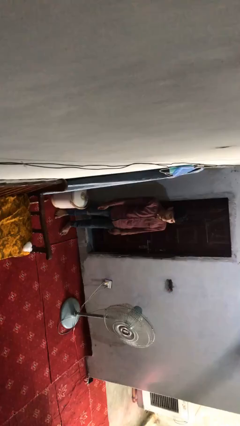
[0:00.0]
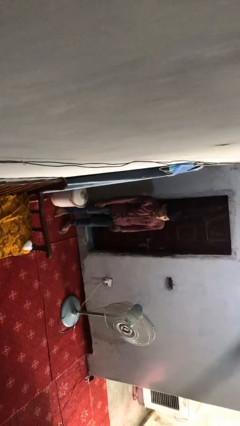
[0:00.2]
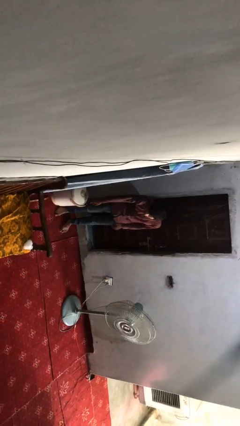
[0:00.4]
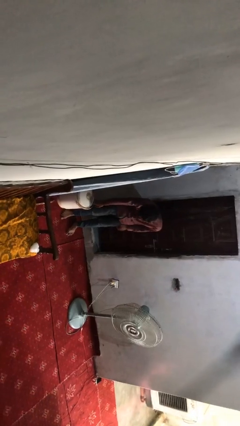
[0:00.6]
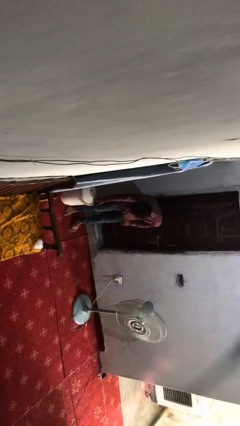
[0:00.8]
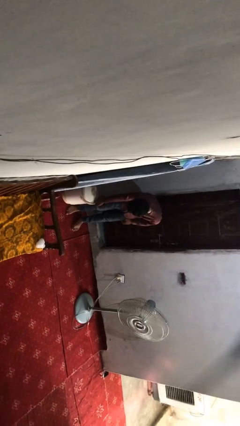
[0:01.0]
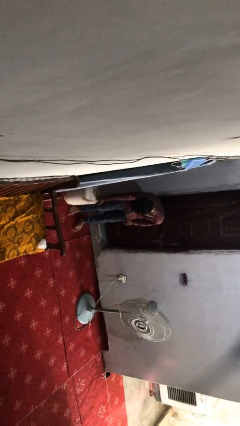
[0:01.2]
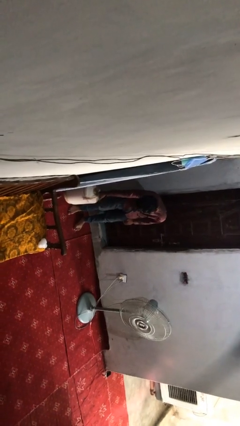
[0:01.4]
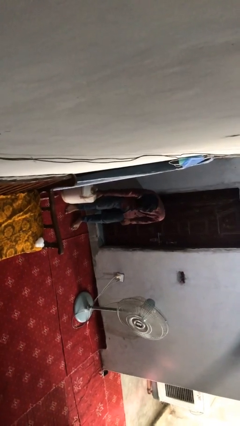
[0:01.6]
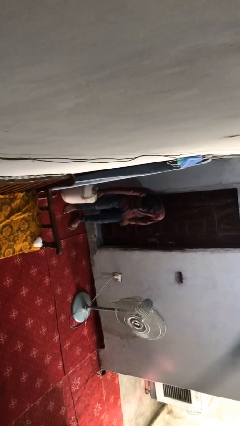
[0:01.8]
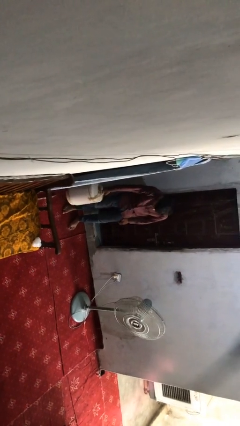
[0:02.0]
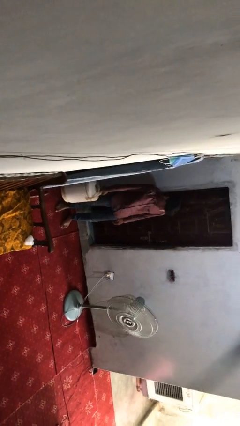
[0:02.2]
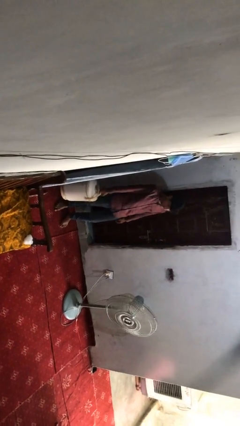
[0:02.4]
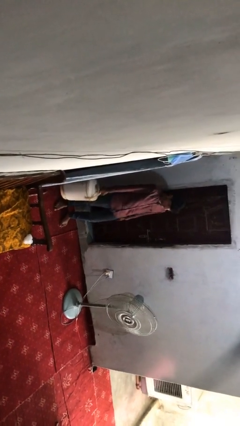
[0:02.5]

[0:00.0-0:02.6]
person picks up object from floor

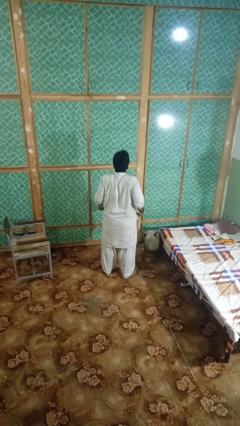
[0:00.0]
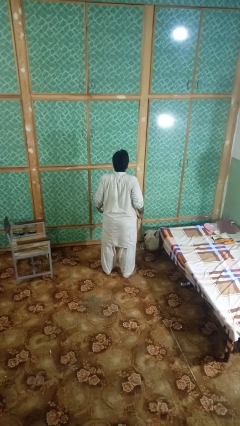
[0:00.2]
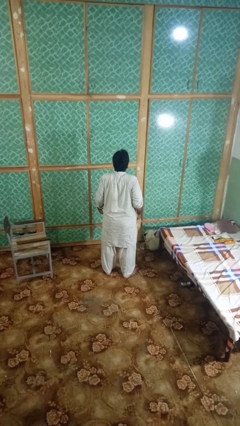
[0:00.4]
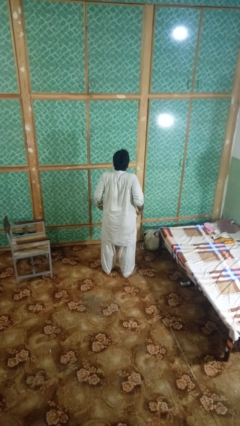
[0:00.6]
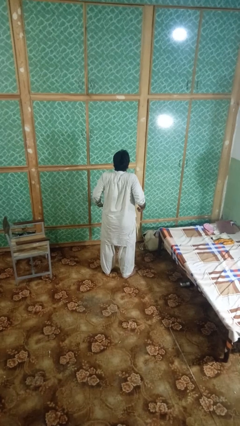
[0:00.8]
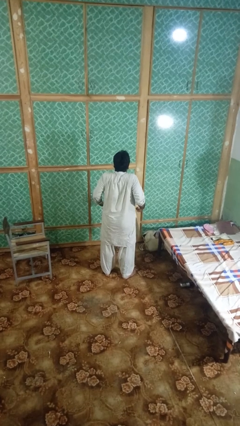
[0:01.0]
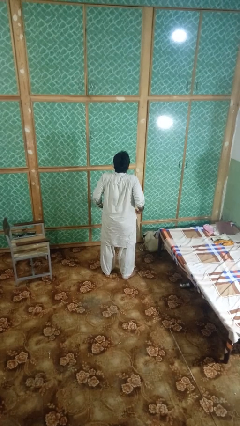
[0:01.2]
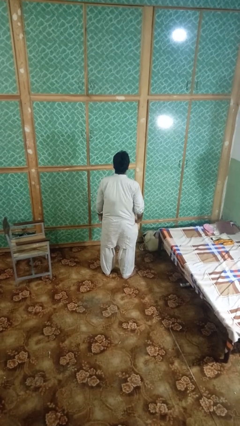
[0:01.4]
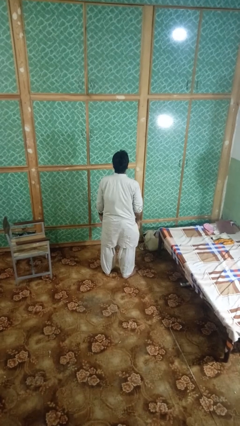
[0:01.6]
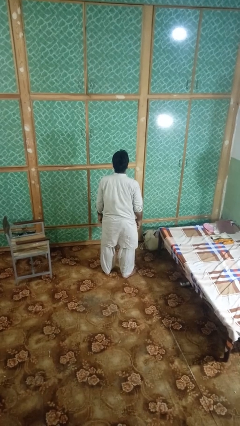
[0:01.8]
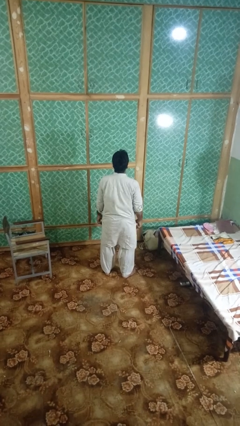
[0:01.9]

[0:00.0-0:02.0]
person shrugs

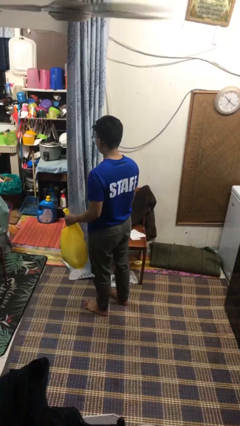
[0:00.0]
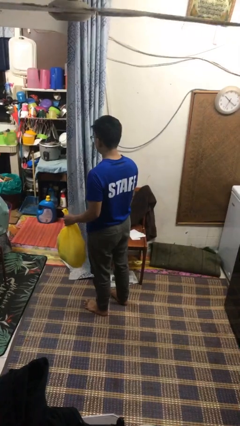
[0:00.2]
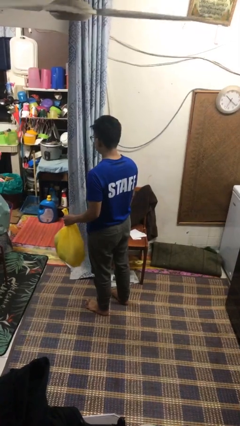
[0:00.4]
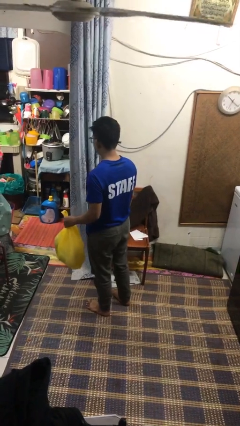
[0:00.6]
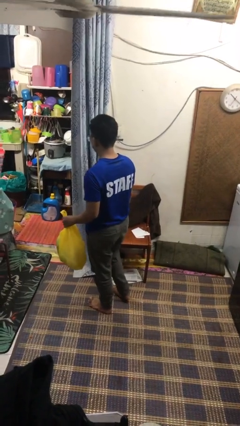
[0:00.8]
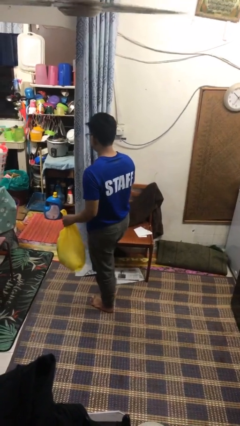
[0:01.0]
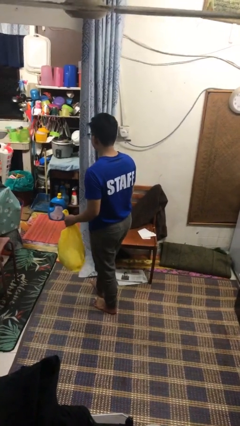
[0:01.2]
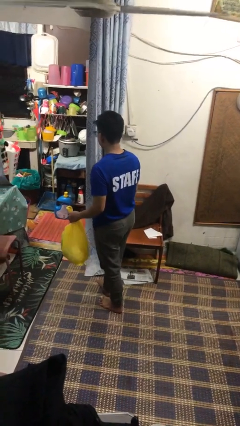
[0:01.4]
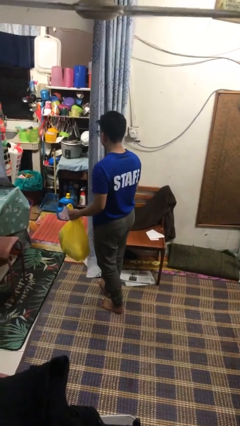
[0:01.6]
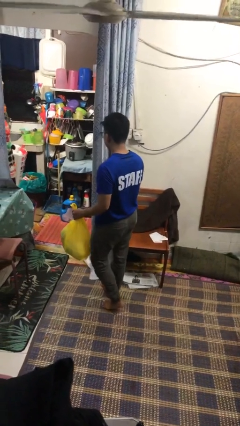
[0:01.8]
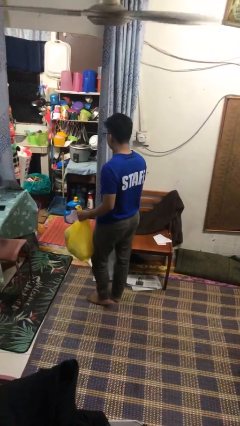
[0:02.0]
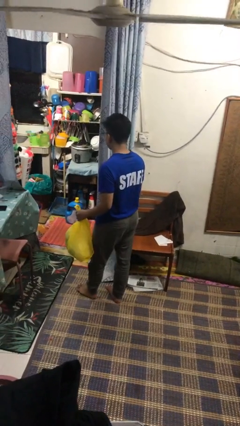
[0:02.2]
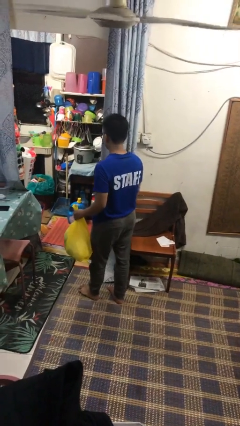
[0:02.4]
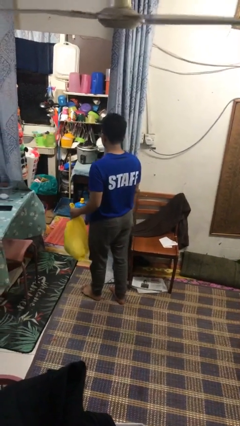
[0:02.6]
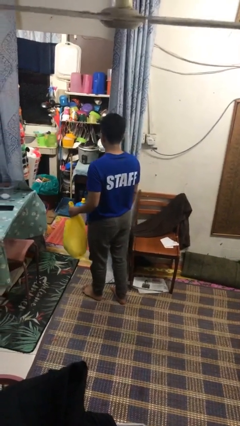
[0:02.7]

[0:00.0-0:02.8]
person carries groceries

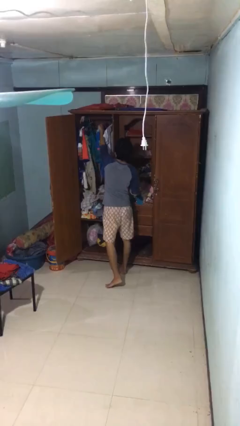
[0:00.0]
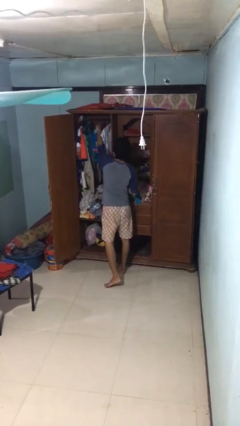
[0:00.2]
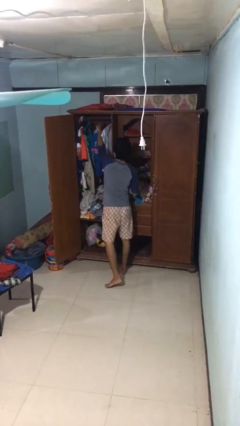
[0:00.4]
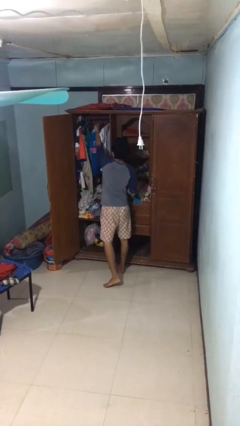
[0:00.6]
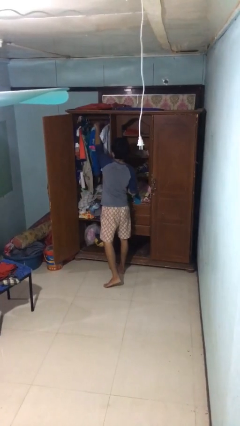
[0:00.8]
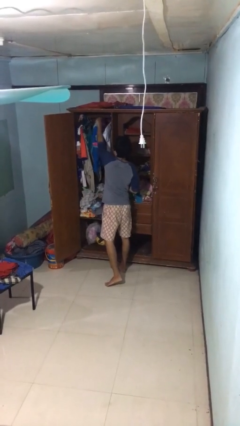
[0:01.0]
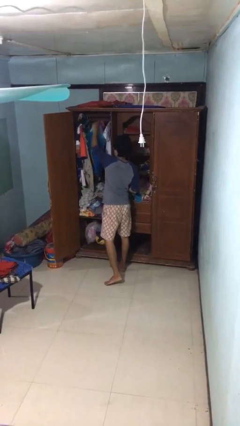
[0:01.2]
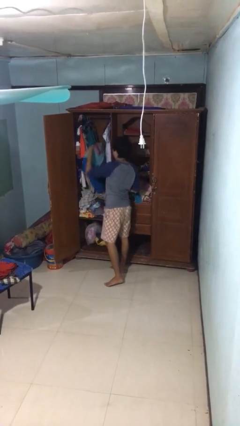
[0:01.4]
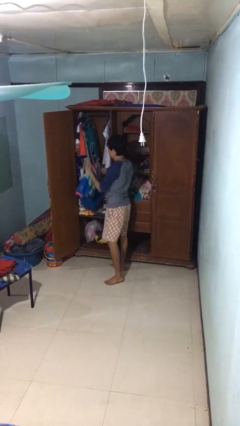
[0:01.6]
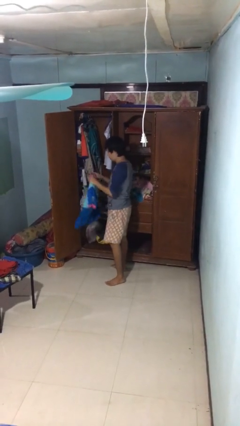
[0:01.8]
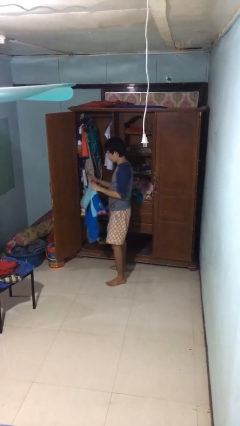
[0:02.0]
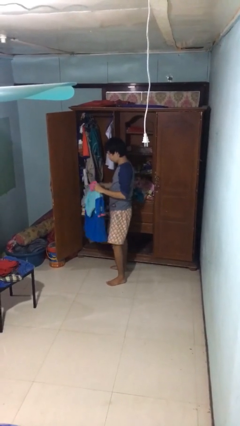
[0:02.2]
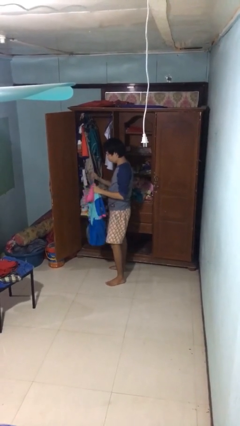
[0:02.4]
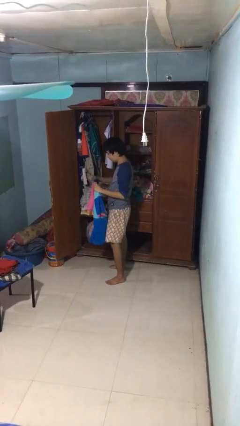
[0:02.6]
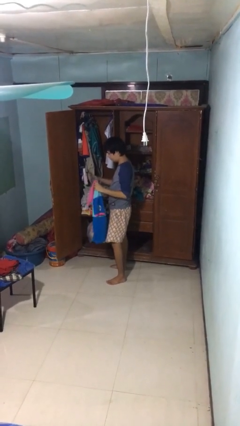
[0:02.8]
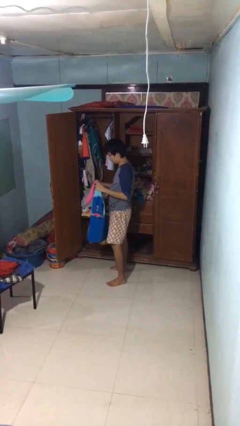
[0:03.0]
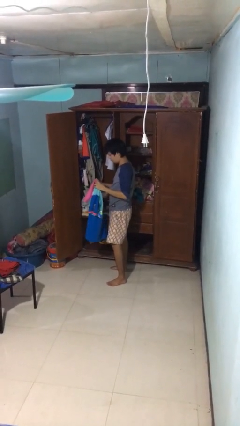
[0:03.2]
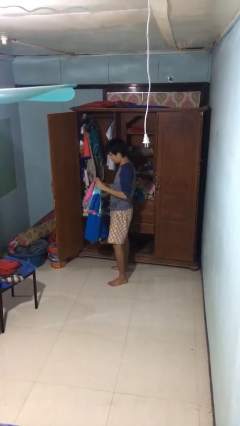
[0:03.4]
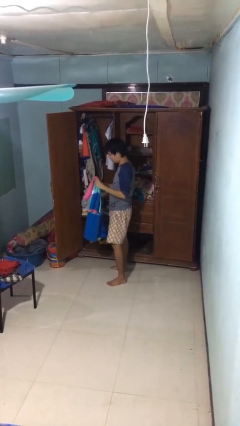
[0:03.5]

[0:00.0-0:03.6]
person takes clothes from closet

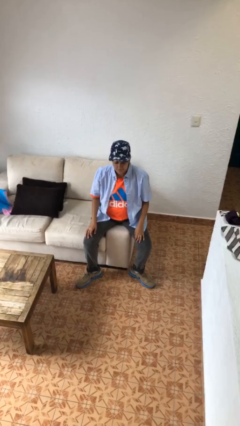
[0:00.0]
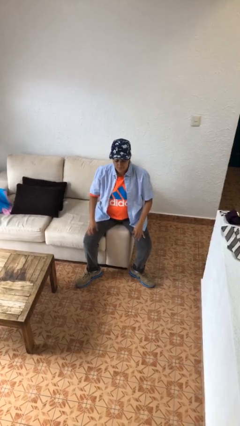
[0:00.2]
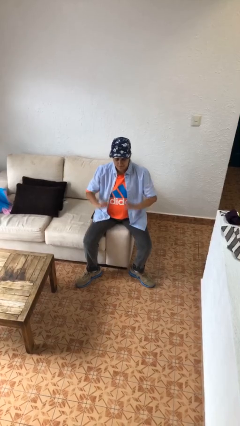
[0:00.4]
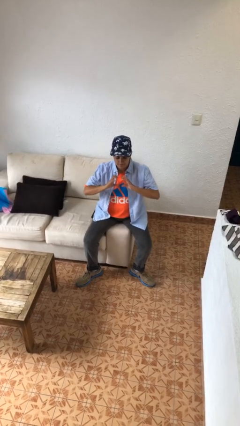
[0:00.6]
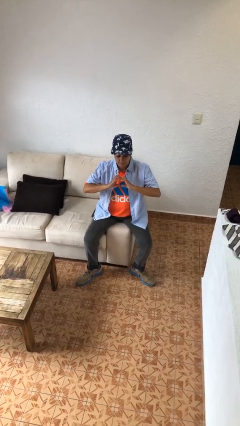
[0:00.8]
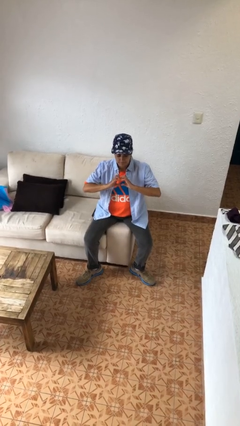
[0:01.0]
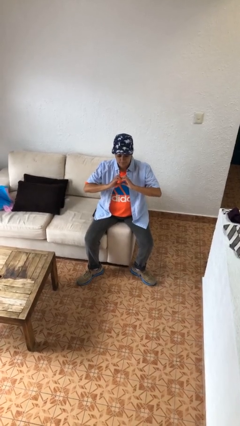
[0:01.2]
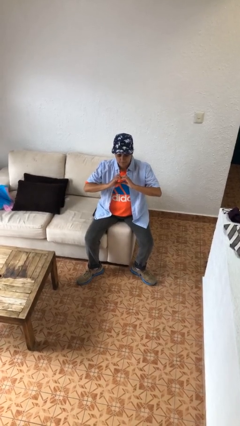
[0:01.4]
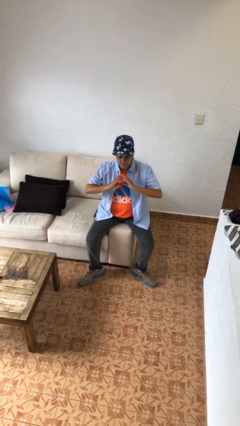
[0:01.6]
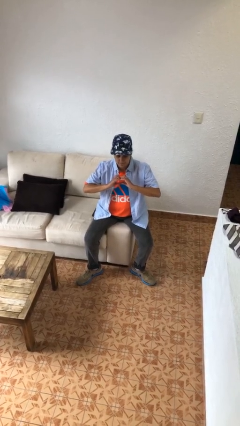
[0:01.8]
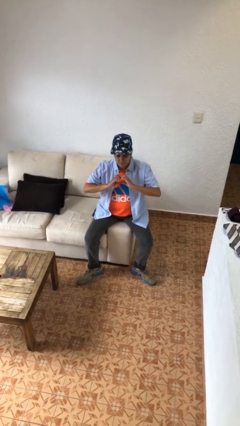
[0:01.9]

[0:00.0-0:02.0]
person gestures heart

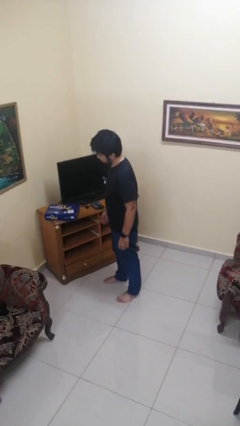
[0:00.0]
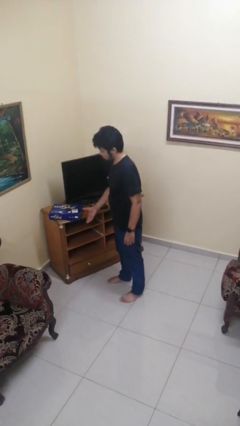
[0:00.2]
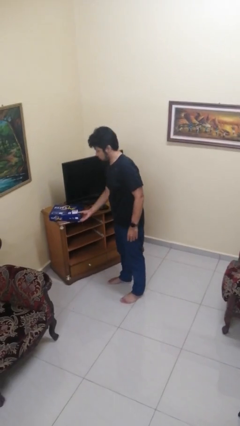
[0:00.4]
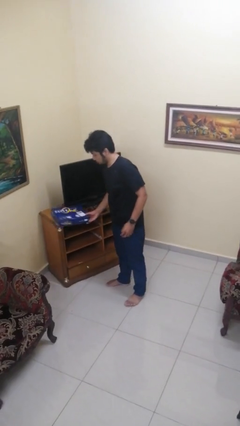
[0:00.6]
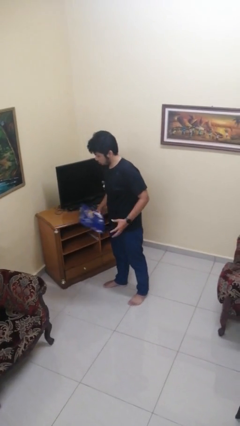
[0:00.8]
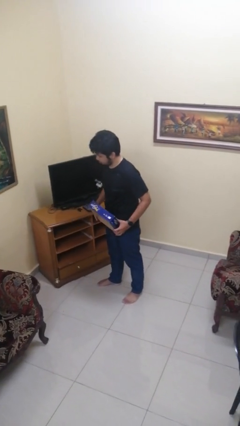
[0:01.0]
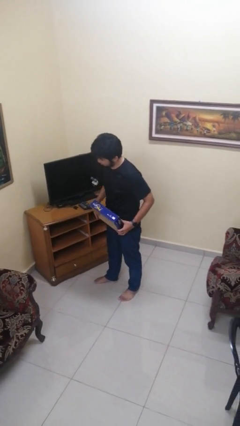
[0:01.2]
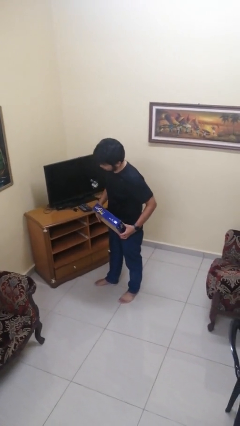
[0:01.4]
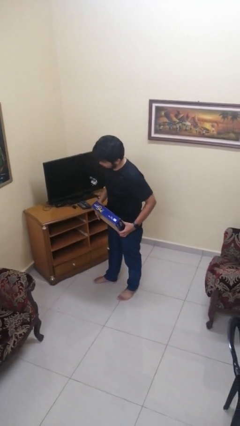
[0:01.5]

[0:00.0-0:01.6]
person picks up object from countertop

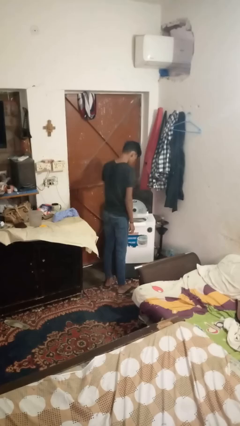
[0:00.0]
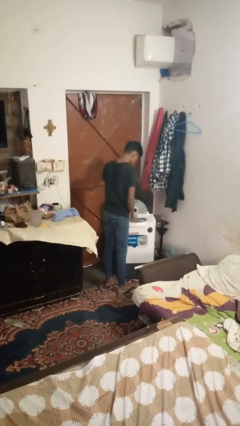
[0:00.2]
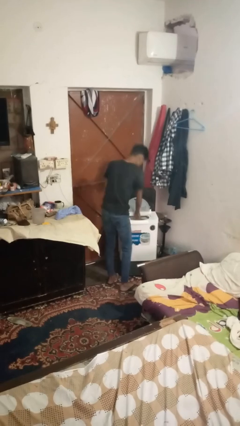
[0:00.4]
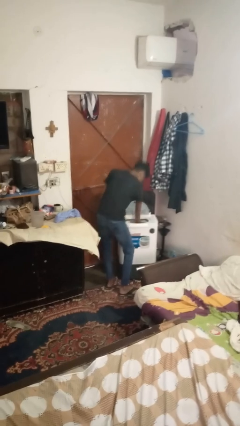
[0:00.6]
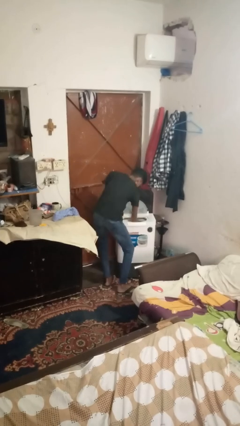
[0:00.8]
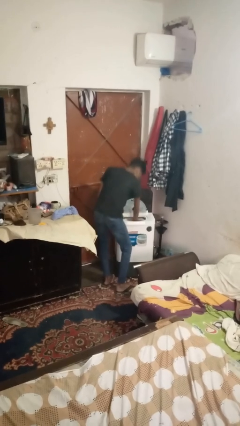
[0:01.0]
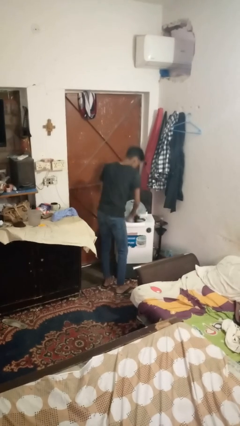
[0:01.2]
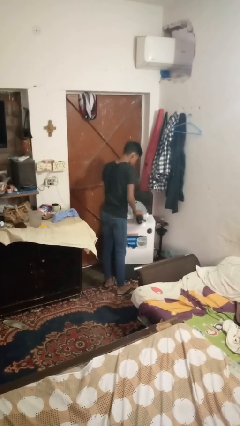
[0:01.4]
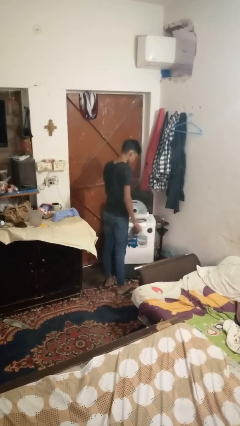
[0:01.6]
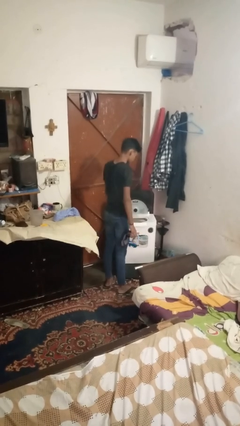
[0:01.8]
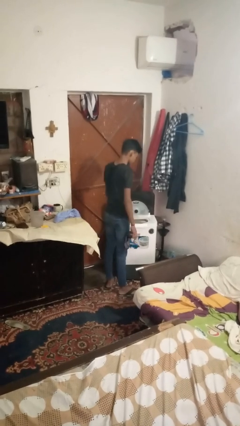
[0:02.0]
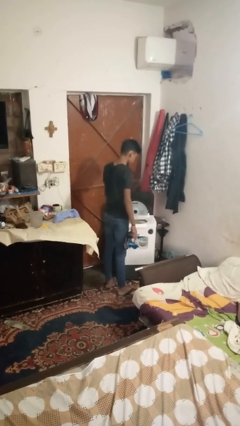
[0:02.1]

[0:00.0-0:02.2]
person unloads clotheswasher
